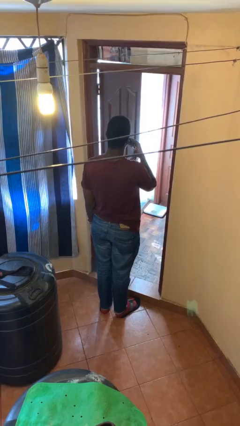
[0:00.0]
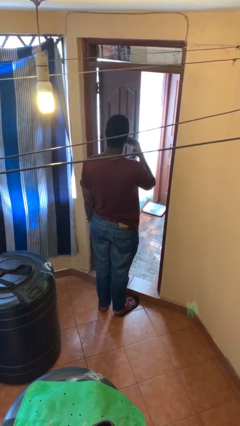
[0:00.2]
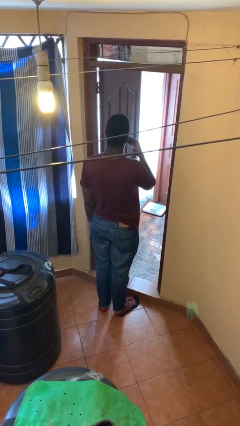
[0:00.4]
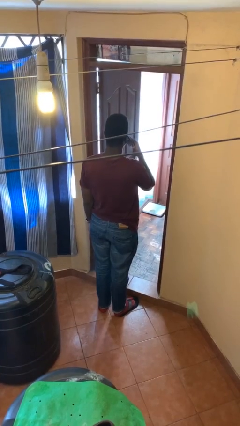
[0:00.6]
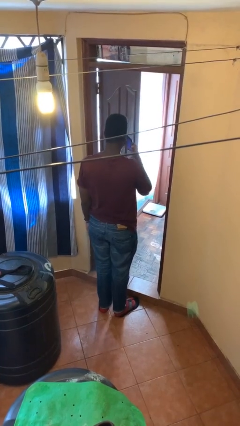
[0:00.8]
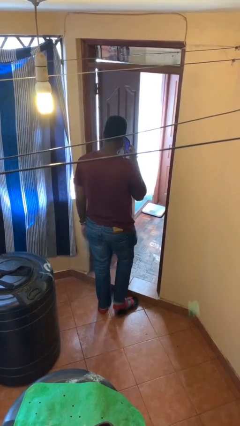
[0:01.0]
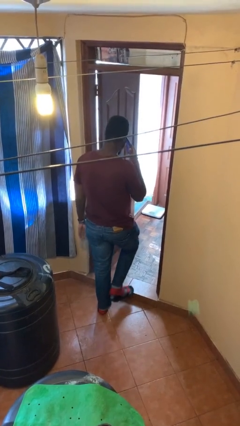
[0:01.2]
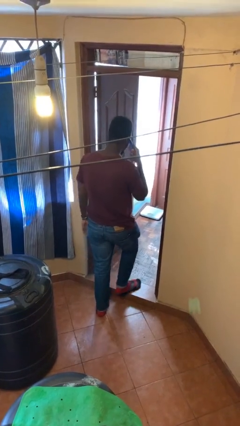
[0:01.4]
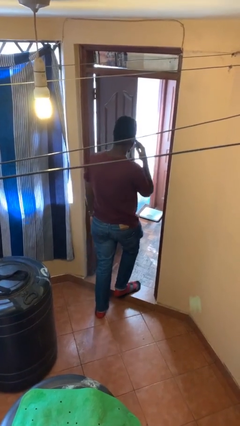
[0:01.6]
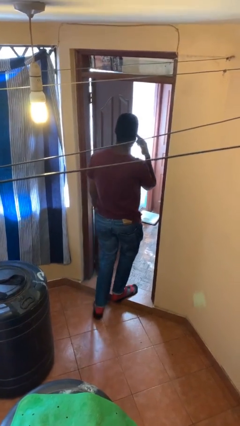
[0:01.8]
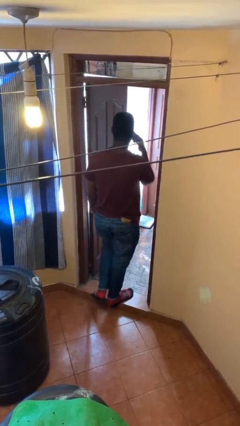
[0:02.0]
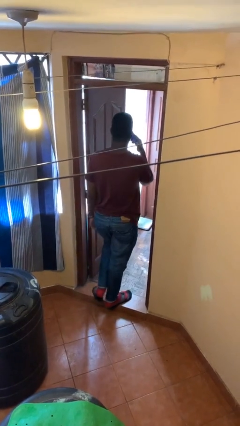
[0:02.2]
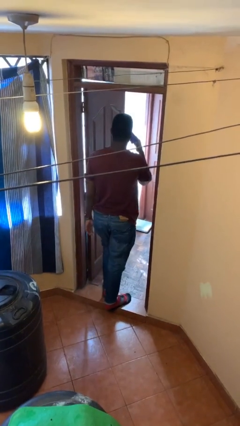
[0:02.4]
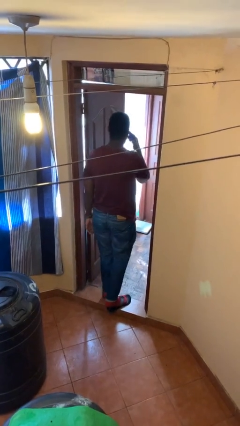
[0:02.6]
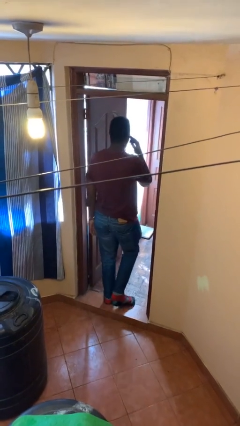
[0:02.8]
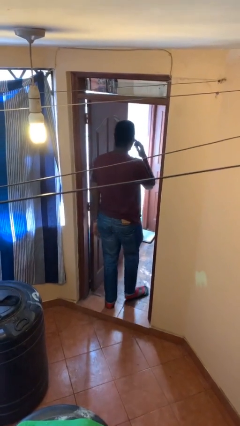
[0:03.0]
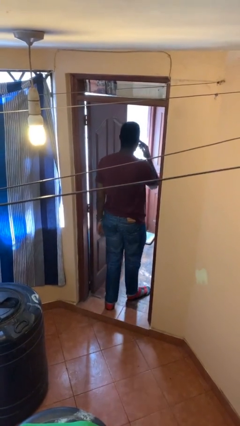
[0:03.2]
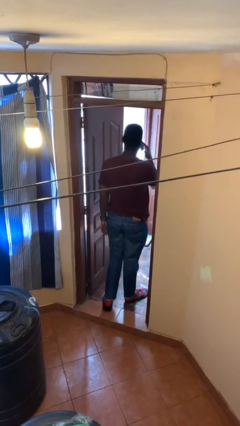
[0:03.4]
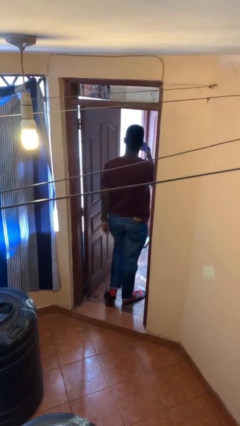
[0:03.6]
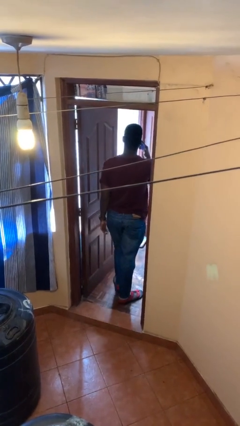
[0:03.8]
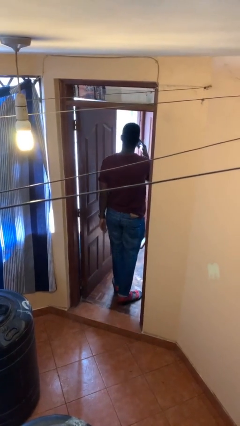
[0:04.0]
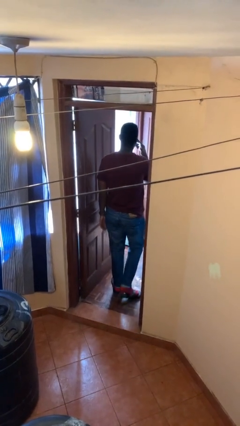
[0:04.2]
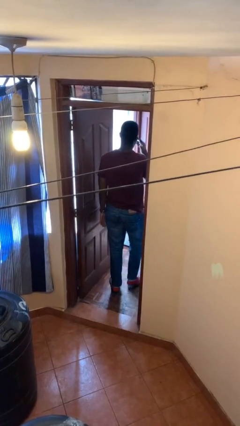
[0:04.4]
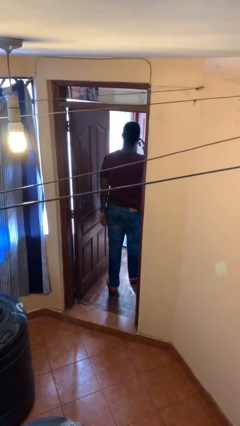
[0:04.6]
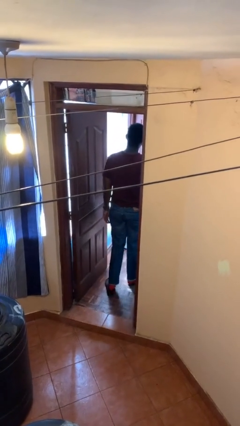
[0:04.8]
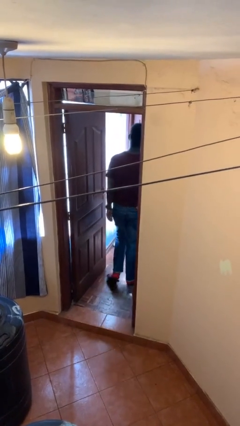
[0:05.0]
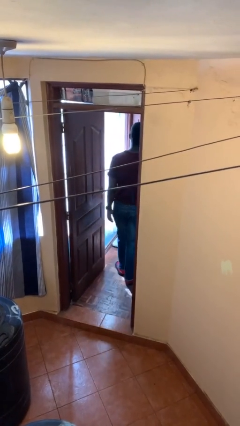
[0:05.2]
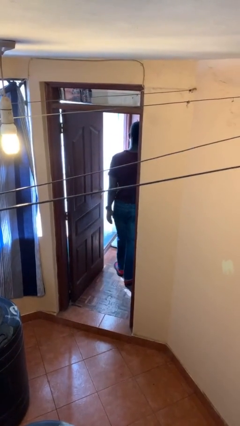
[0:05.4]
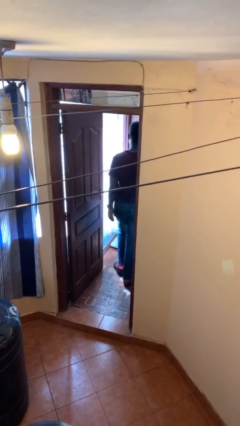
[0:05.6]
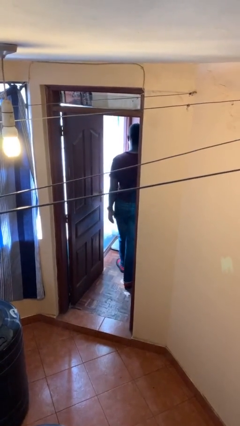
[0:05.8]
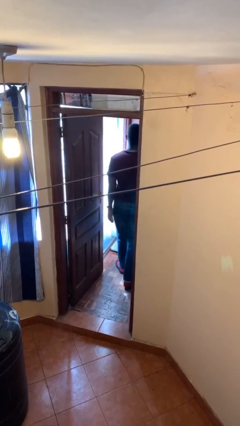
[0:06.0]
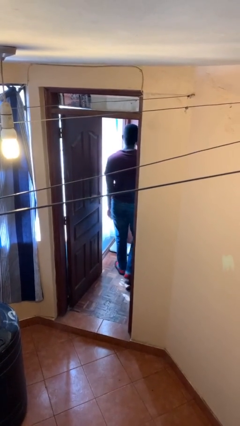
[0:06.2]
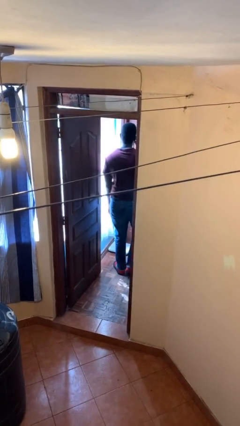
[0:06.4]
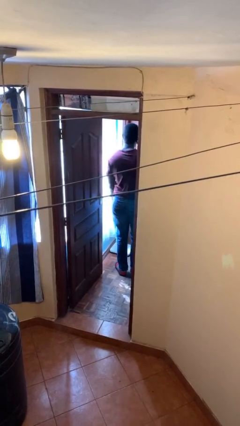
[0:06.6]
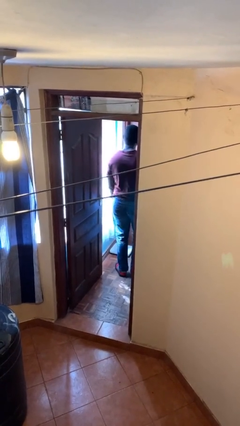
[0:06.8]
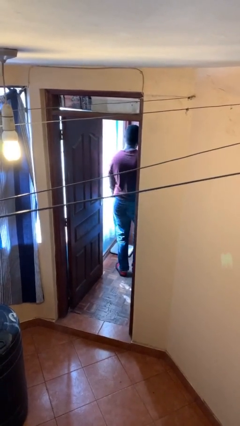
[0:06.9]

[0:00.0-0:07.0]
person exits scene through structure

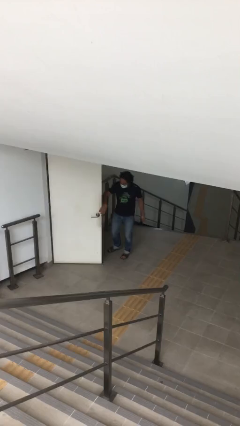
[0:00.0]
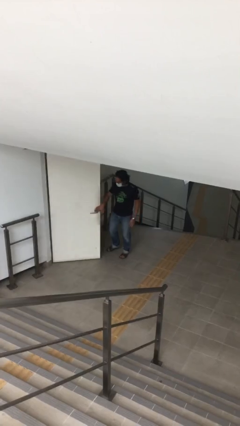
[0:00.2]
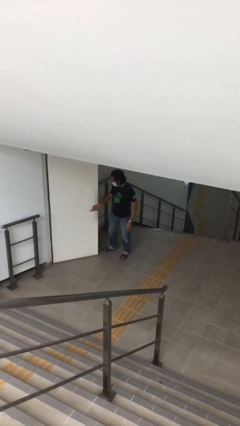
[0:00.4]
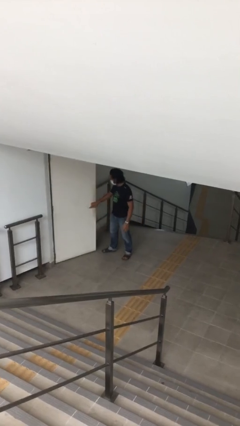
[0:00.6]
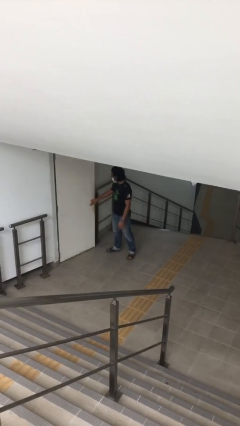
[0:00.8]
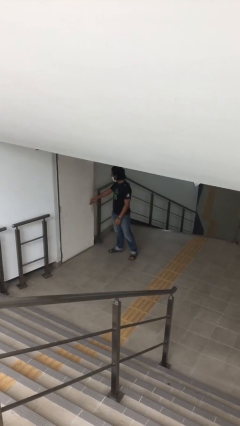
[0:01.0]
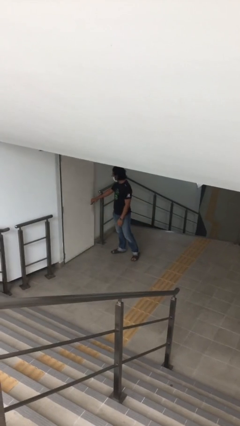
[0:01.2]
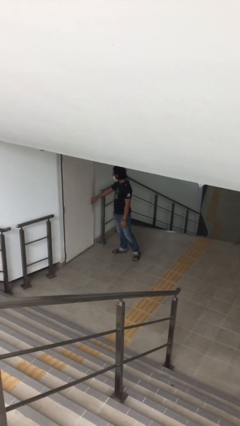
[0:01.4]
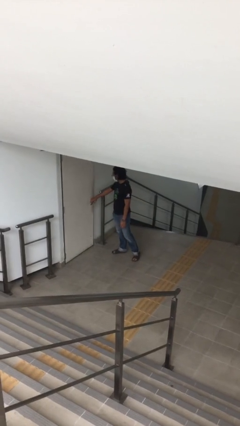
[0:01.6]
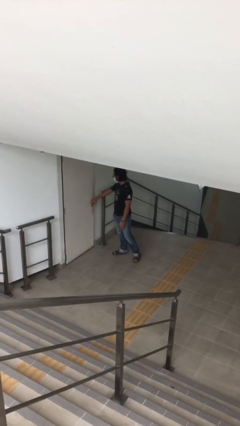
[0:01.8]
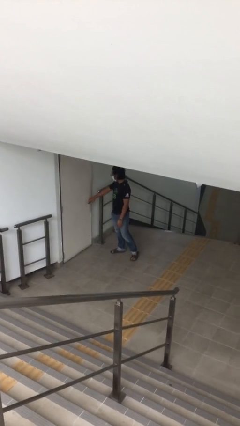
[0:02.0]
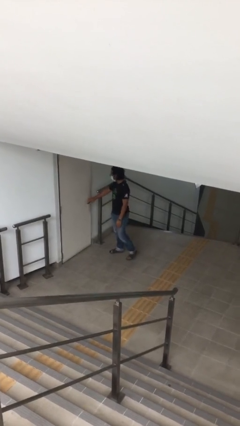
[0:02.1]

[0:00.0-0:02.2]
person closes facility door

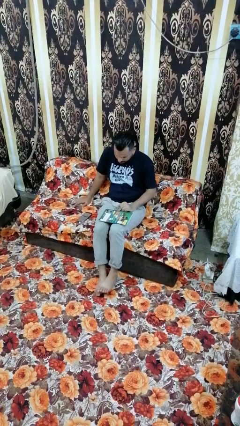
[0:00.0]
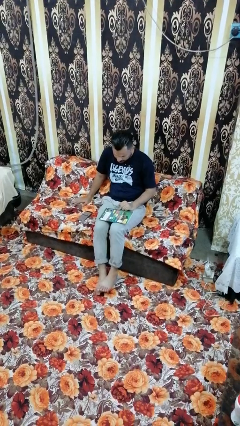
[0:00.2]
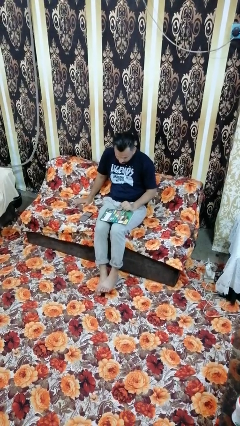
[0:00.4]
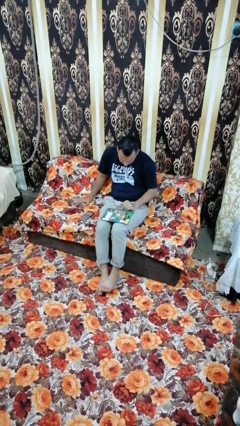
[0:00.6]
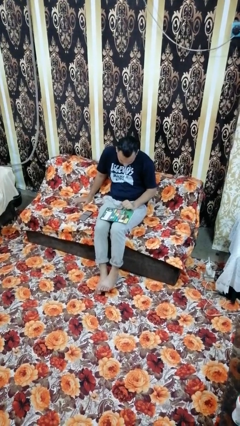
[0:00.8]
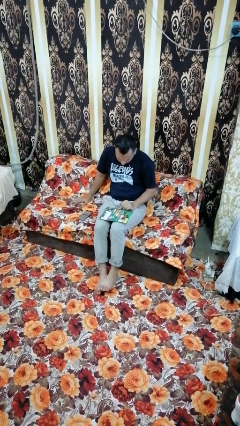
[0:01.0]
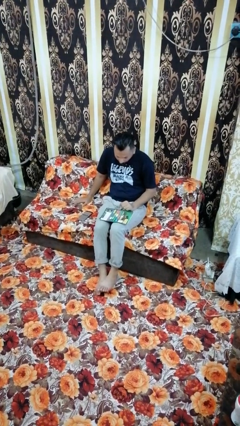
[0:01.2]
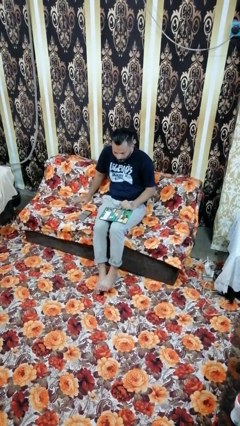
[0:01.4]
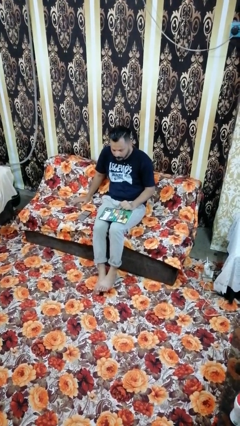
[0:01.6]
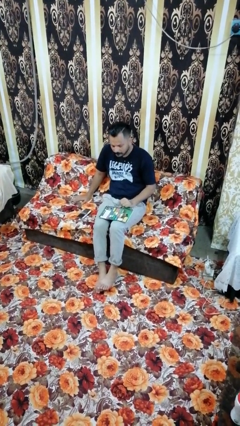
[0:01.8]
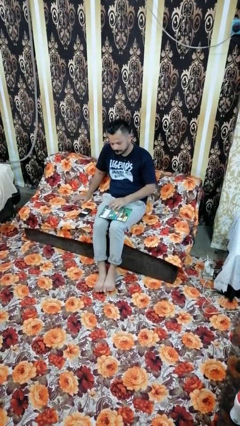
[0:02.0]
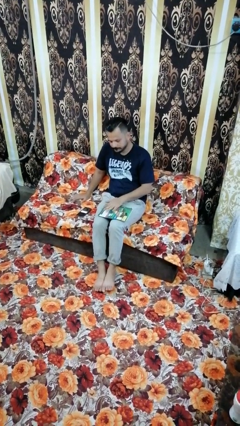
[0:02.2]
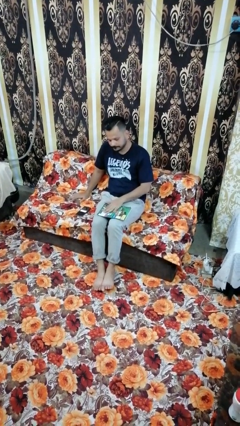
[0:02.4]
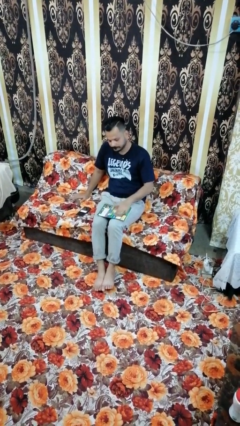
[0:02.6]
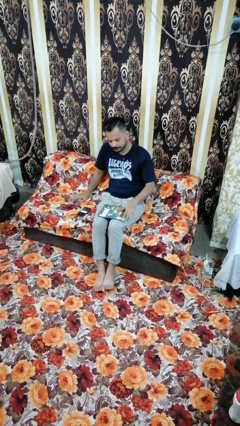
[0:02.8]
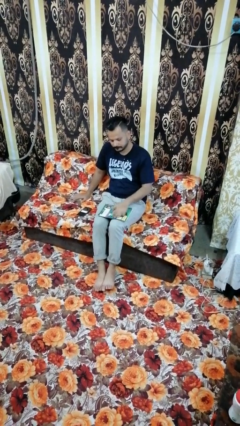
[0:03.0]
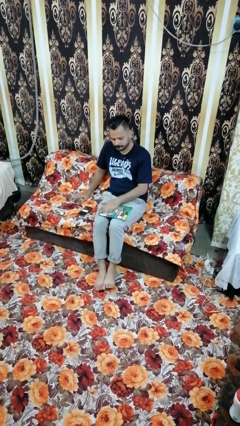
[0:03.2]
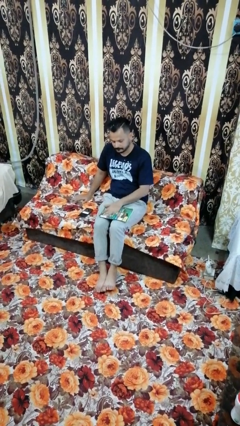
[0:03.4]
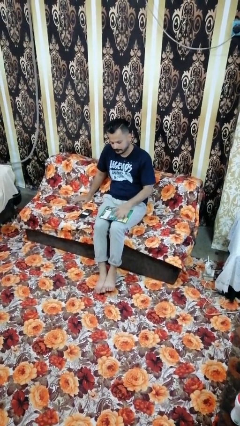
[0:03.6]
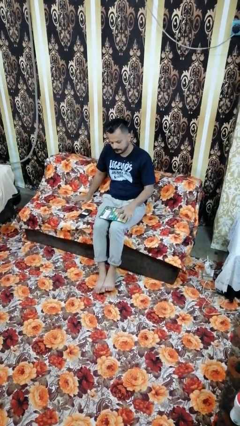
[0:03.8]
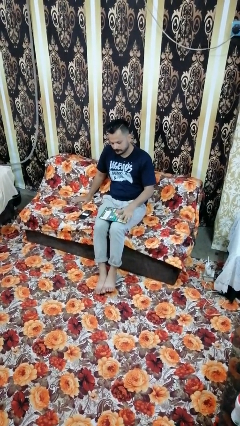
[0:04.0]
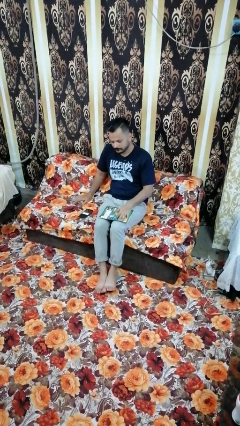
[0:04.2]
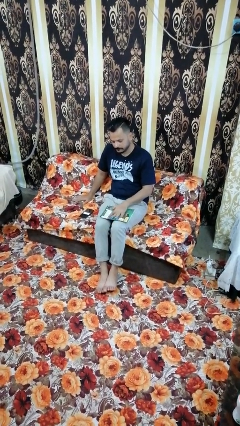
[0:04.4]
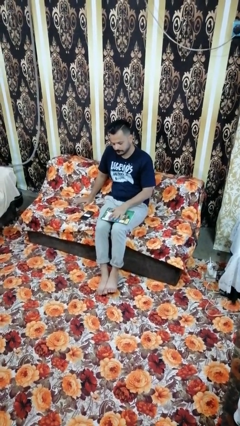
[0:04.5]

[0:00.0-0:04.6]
person waves hand over object

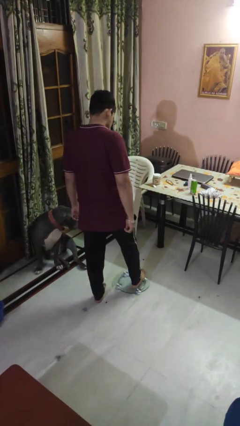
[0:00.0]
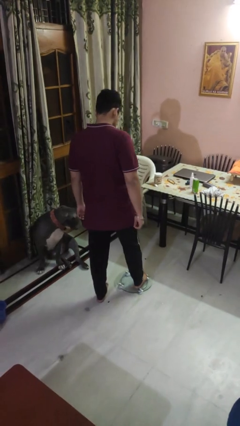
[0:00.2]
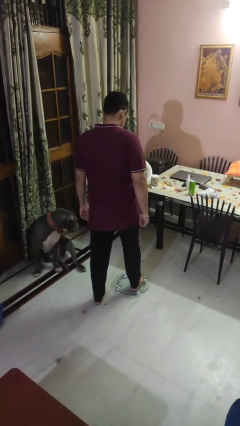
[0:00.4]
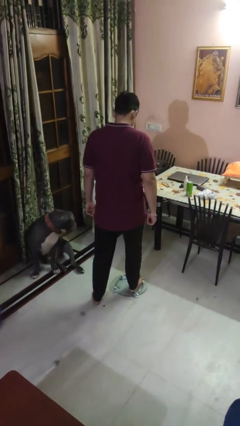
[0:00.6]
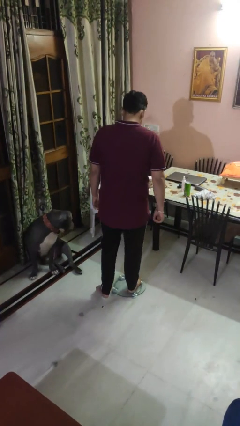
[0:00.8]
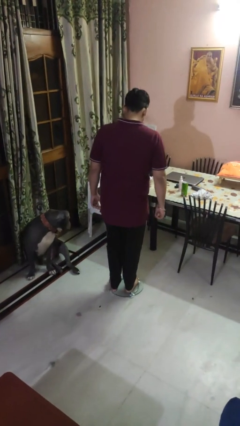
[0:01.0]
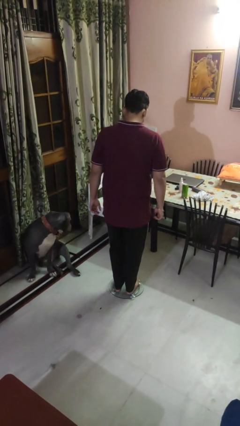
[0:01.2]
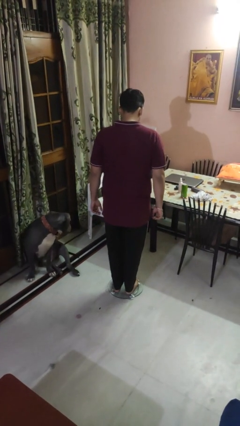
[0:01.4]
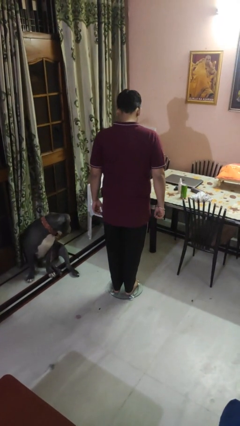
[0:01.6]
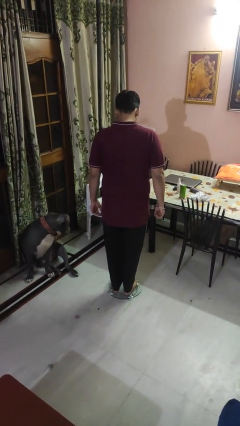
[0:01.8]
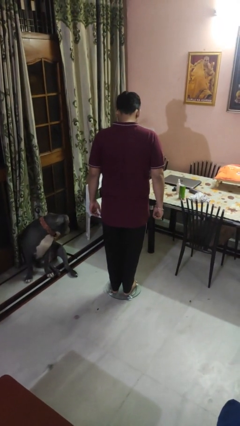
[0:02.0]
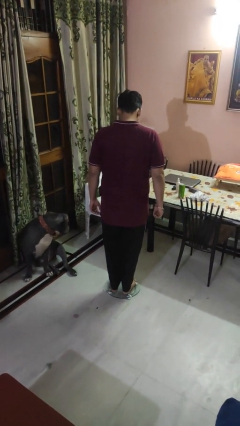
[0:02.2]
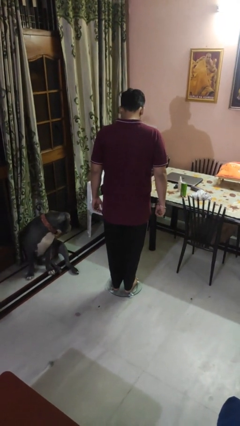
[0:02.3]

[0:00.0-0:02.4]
person uses bodyweight scale

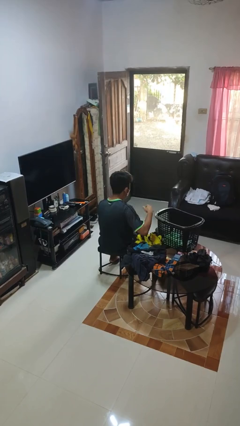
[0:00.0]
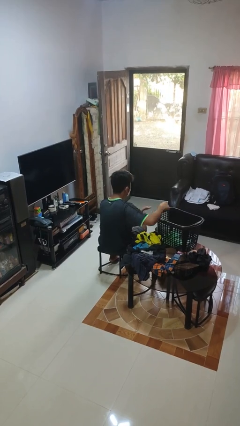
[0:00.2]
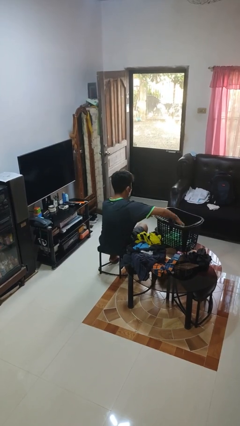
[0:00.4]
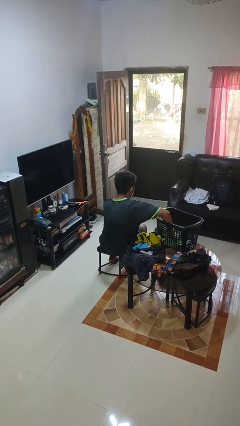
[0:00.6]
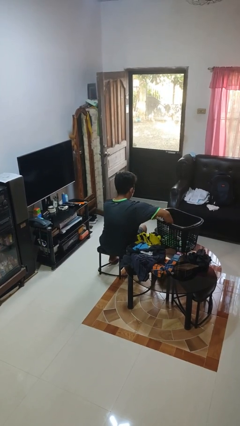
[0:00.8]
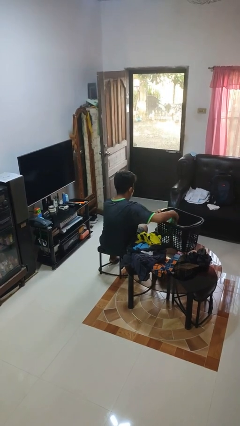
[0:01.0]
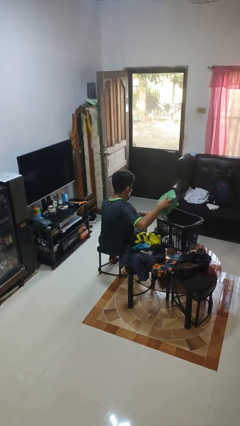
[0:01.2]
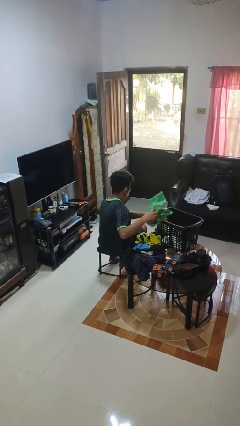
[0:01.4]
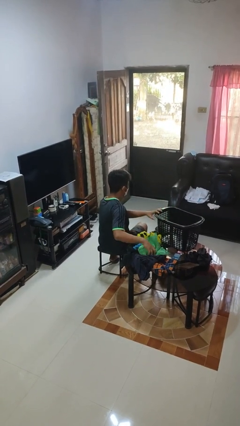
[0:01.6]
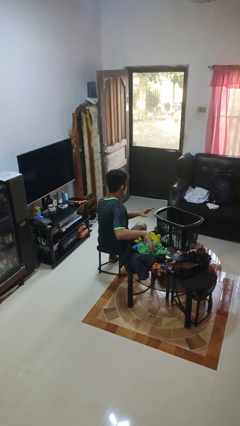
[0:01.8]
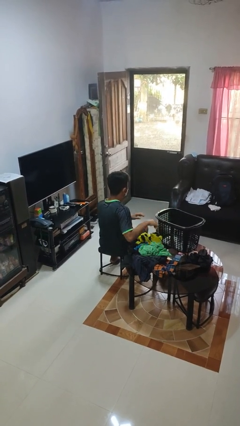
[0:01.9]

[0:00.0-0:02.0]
person takes object from basket
